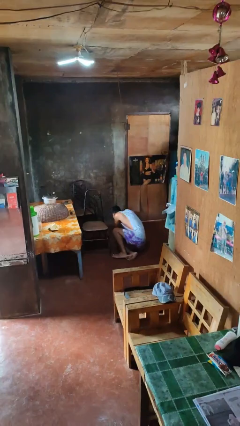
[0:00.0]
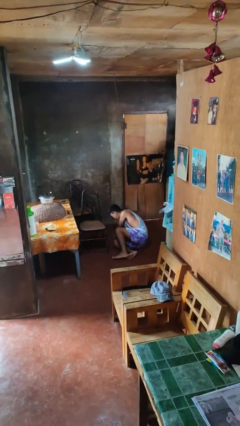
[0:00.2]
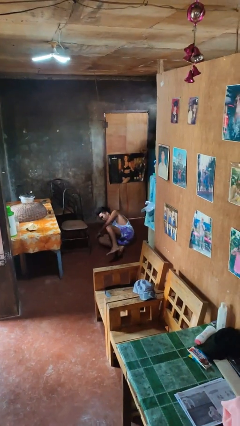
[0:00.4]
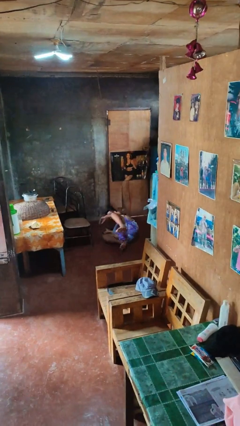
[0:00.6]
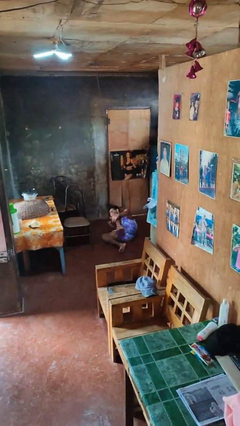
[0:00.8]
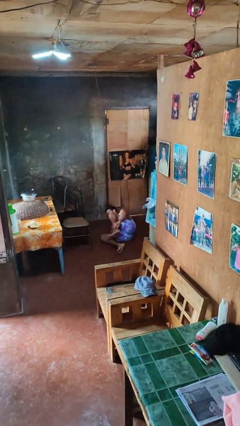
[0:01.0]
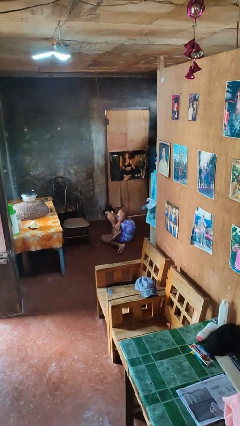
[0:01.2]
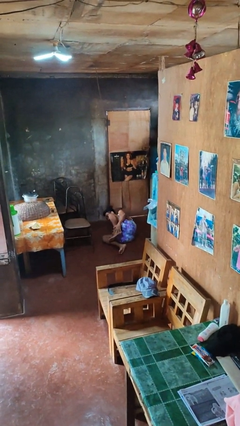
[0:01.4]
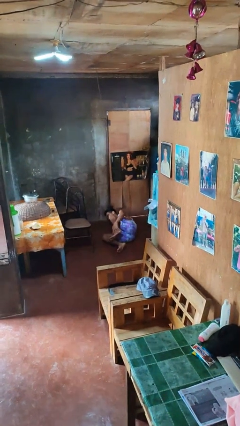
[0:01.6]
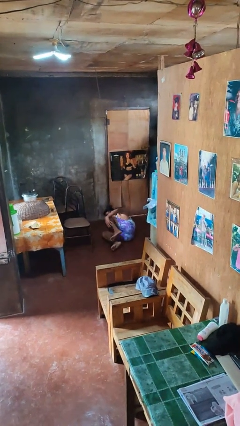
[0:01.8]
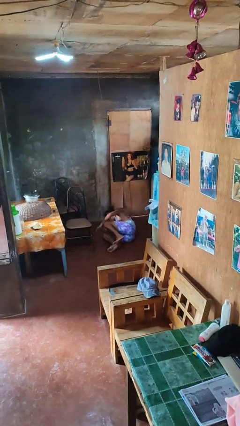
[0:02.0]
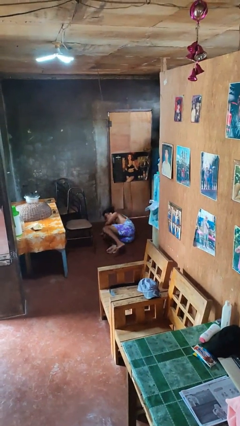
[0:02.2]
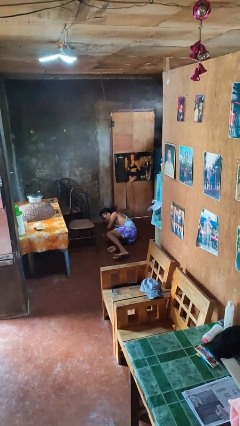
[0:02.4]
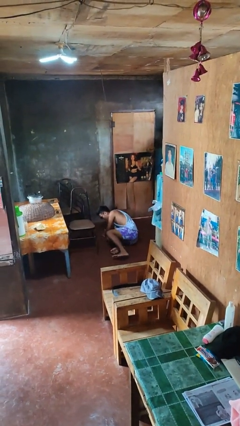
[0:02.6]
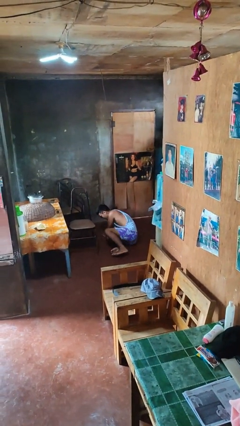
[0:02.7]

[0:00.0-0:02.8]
person lies down on floor

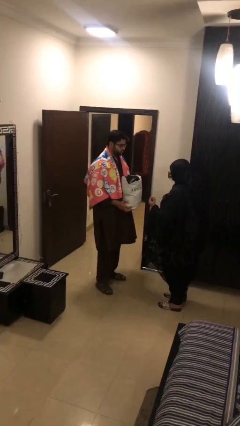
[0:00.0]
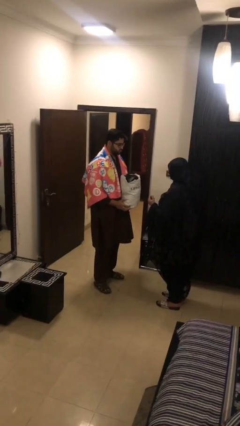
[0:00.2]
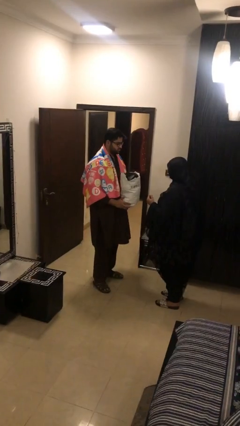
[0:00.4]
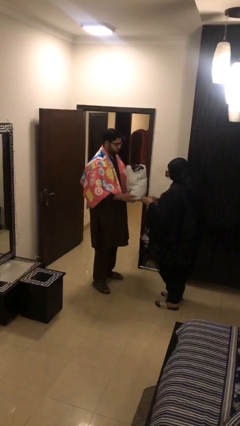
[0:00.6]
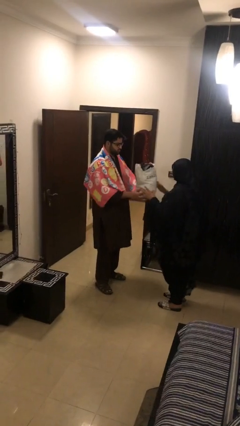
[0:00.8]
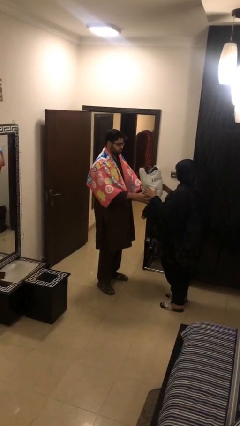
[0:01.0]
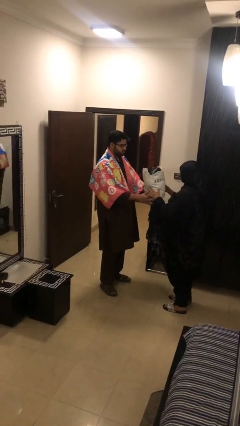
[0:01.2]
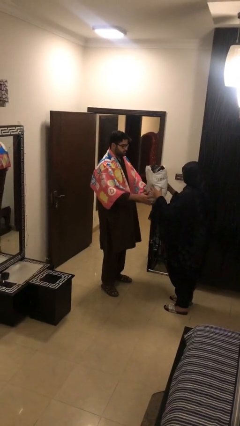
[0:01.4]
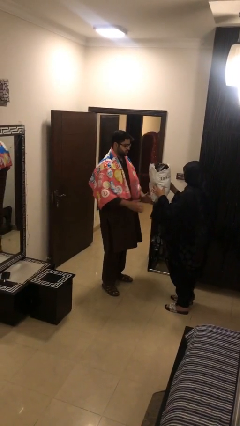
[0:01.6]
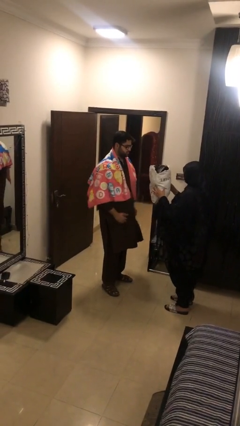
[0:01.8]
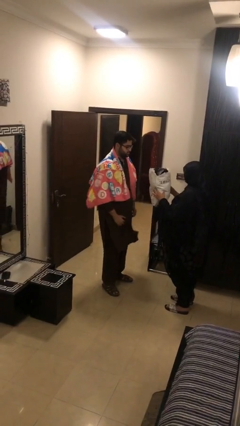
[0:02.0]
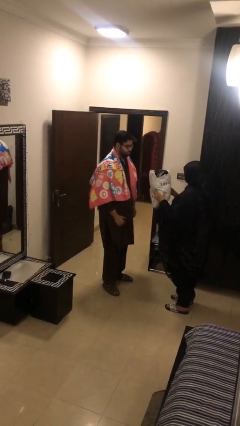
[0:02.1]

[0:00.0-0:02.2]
person transfers object to person

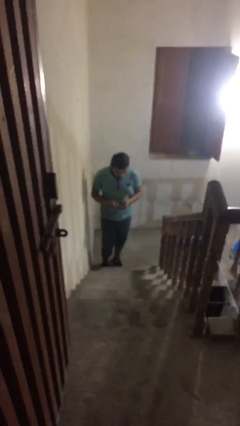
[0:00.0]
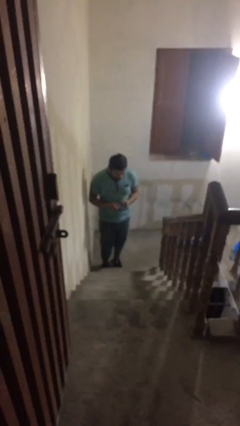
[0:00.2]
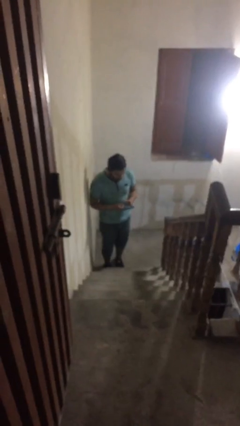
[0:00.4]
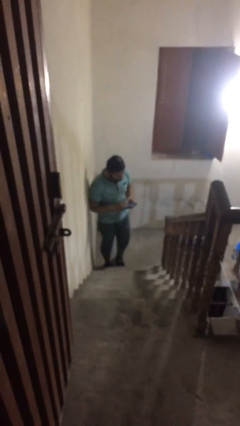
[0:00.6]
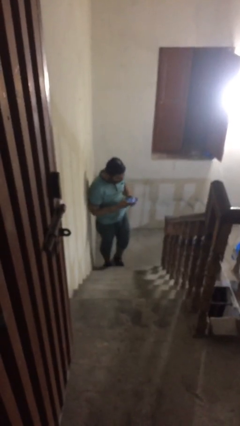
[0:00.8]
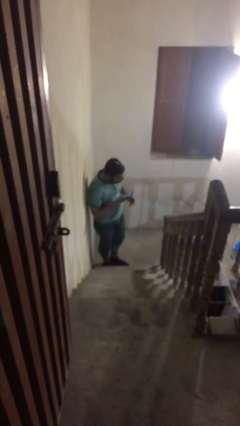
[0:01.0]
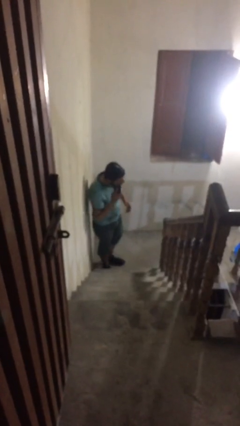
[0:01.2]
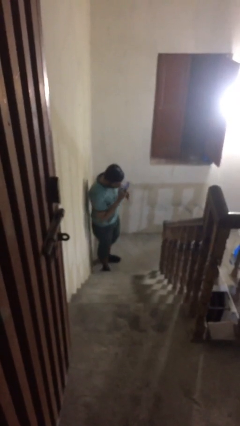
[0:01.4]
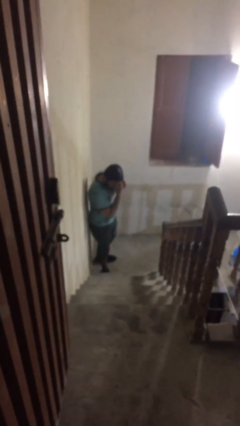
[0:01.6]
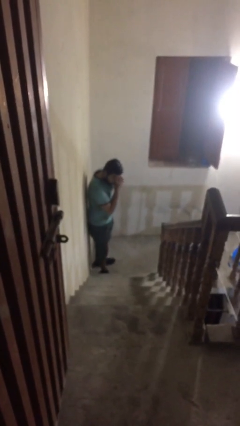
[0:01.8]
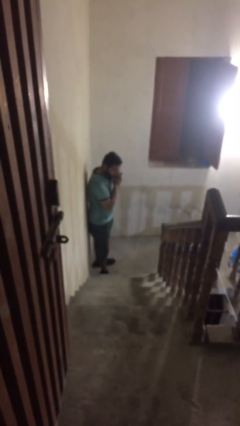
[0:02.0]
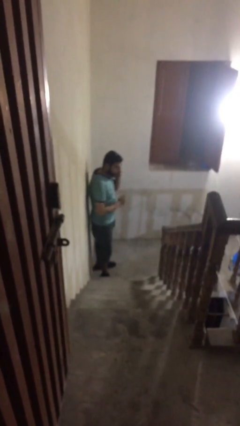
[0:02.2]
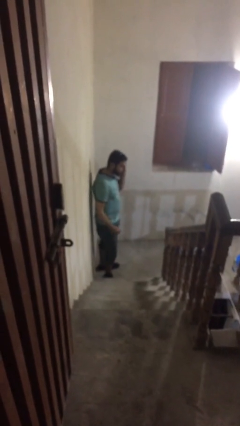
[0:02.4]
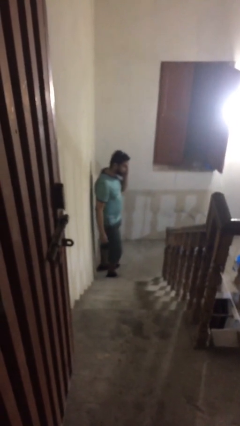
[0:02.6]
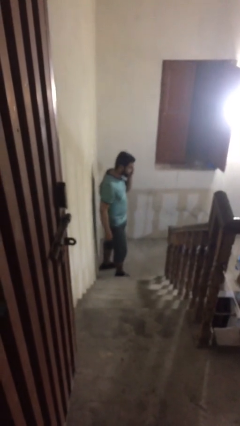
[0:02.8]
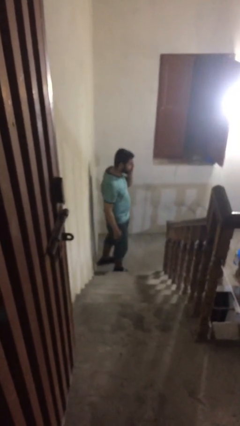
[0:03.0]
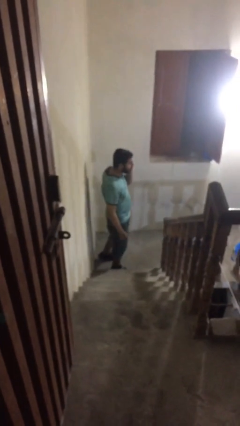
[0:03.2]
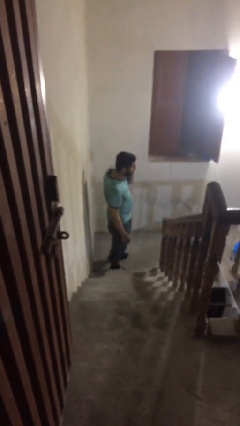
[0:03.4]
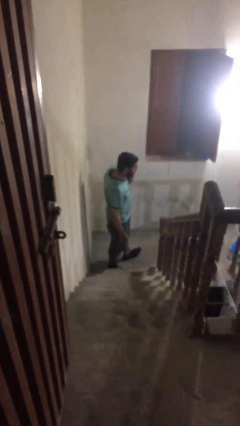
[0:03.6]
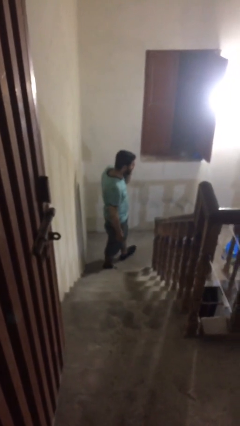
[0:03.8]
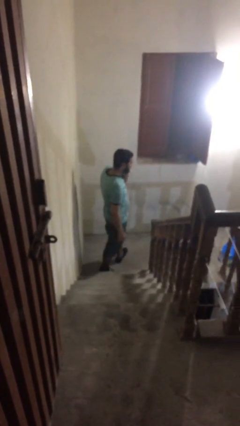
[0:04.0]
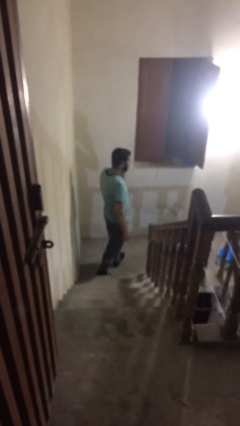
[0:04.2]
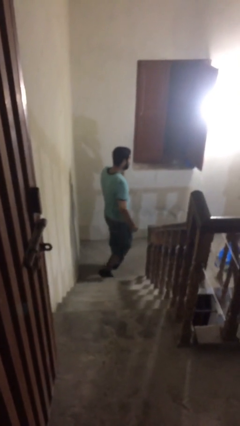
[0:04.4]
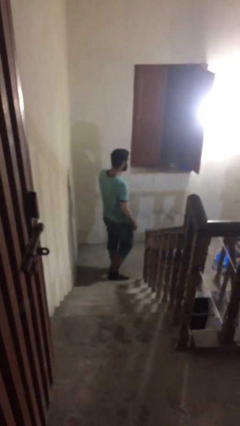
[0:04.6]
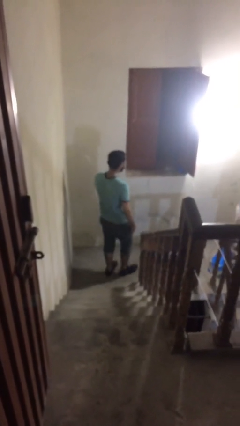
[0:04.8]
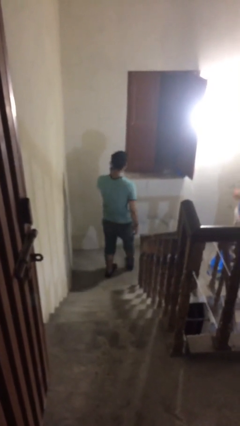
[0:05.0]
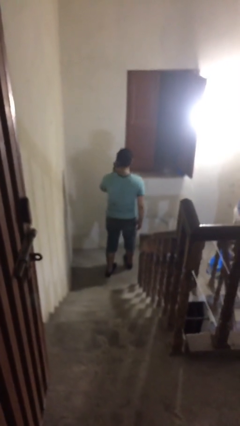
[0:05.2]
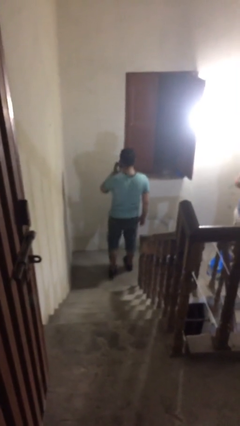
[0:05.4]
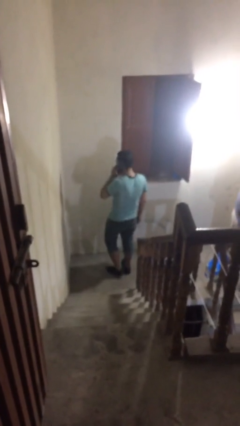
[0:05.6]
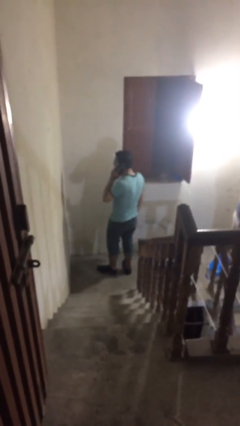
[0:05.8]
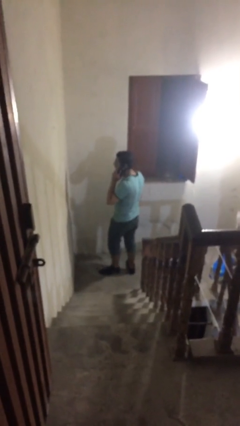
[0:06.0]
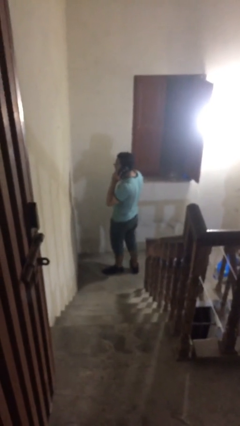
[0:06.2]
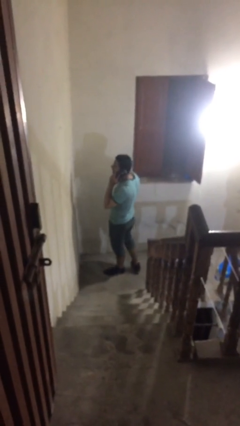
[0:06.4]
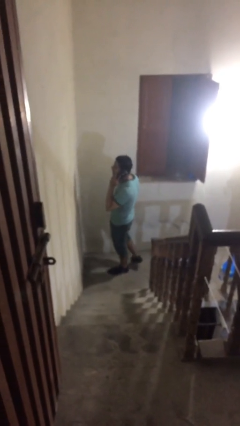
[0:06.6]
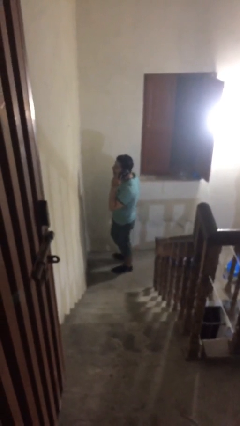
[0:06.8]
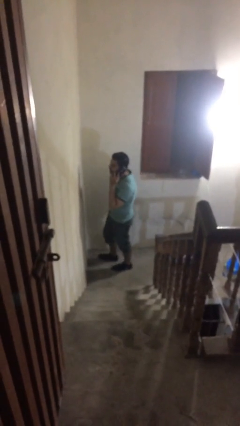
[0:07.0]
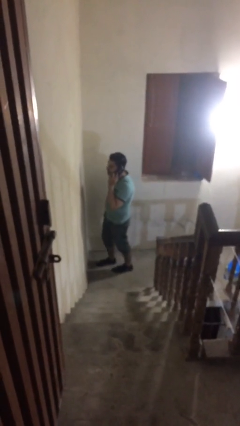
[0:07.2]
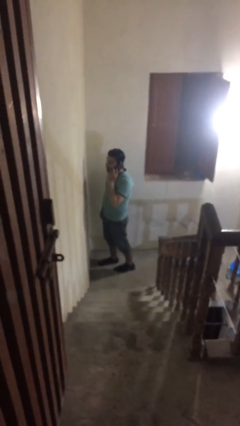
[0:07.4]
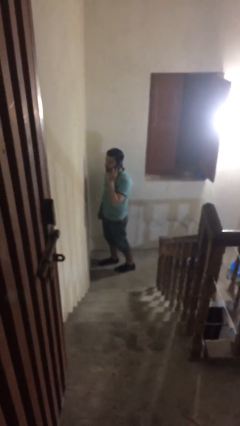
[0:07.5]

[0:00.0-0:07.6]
person talks on phone

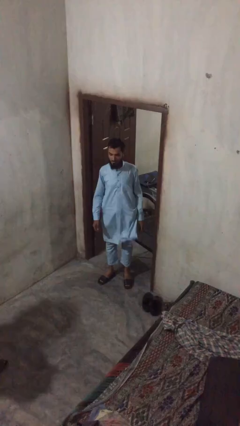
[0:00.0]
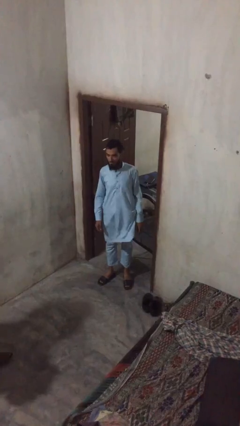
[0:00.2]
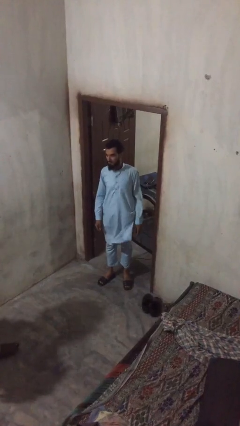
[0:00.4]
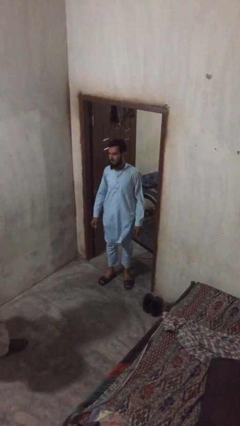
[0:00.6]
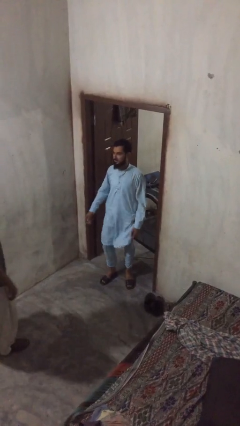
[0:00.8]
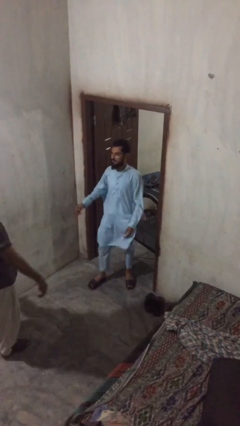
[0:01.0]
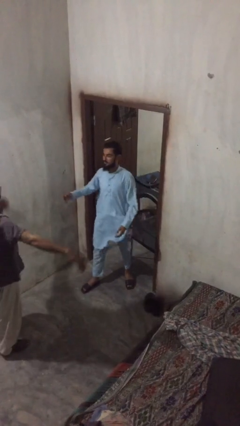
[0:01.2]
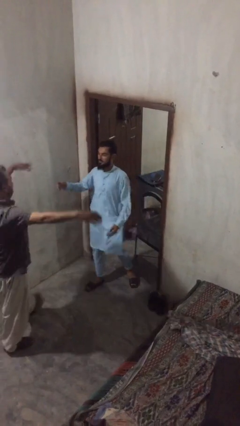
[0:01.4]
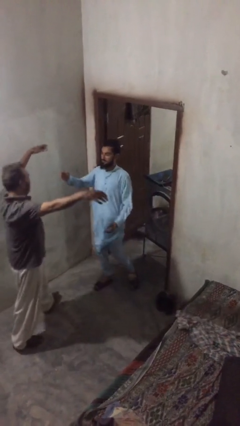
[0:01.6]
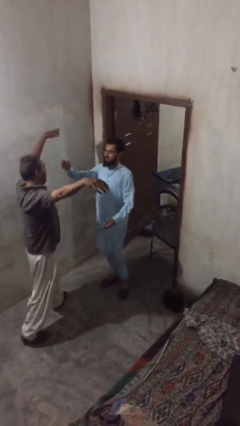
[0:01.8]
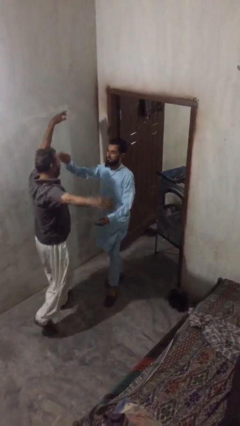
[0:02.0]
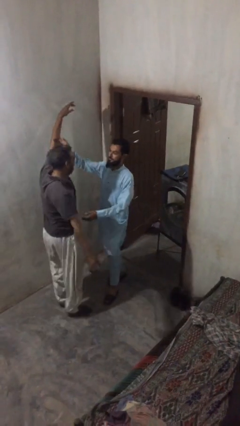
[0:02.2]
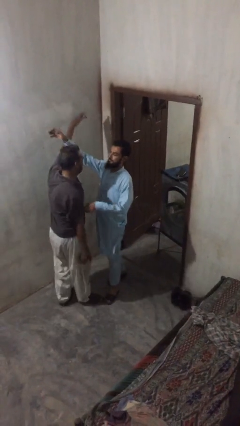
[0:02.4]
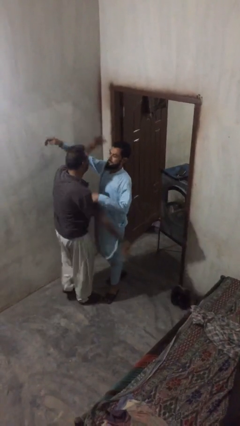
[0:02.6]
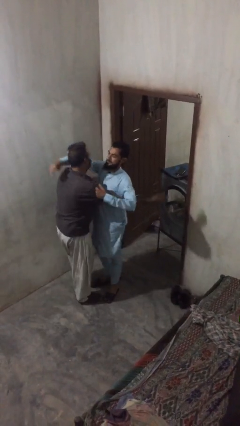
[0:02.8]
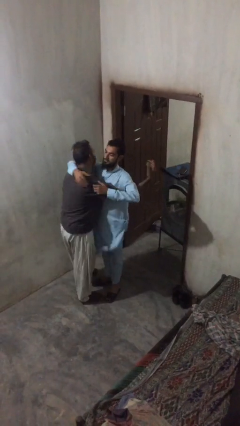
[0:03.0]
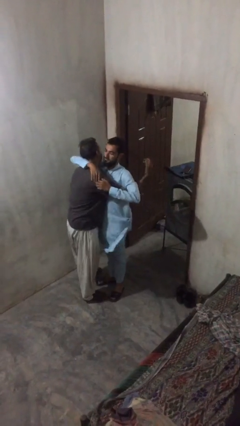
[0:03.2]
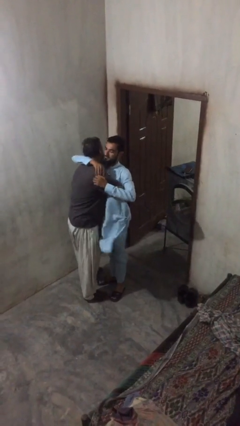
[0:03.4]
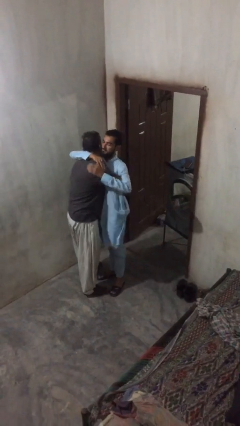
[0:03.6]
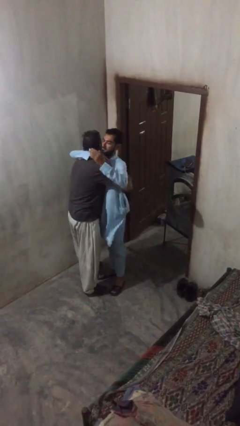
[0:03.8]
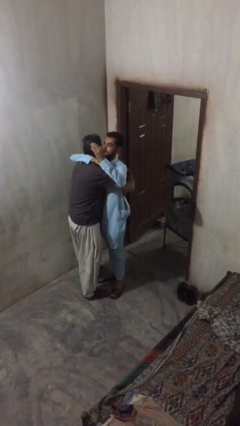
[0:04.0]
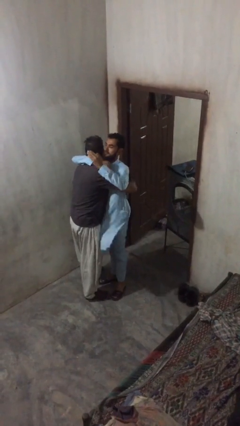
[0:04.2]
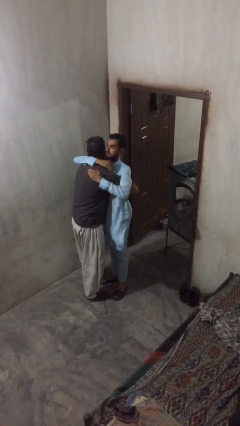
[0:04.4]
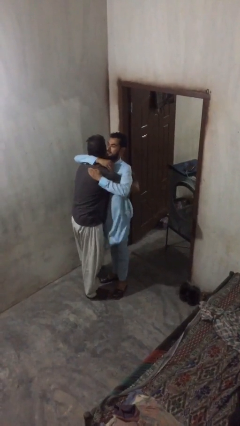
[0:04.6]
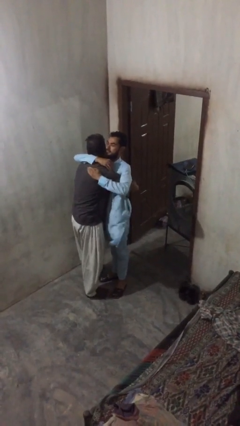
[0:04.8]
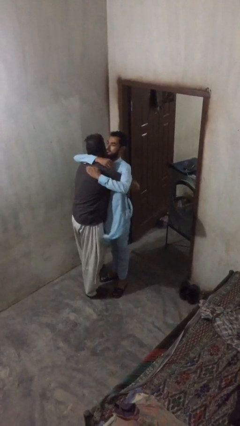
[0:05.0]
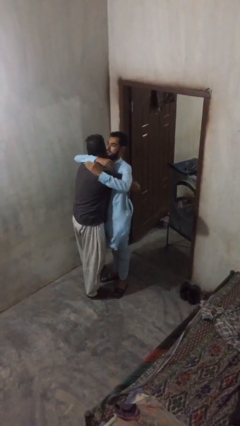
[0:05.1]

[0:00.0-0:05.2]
person embraces person
